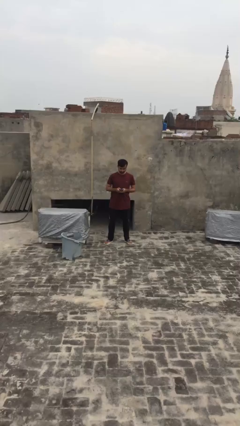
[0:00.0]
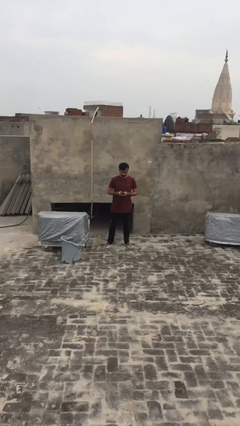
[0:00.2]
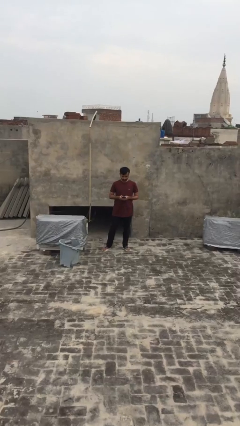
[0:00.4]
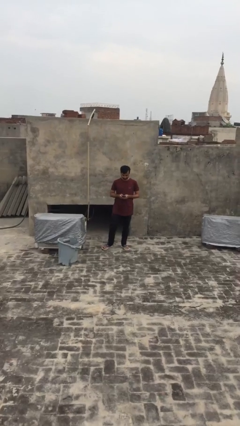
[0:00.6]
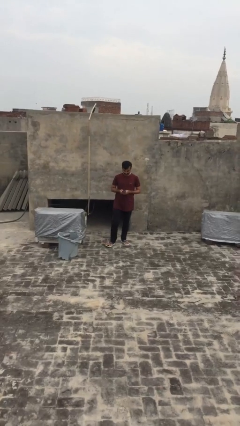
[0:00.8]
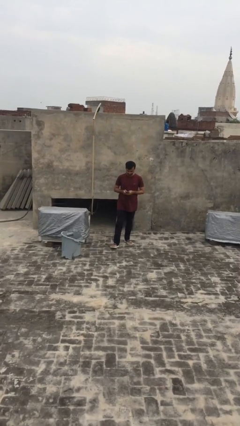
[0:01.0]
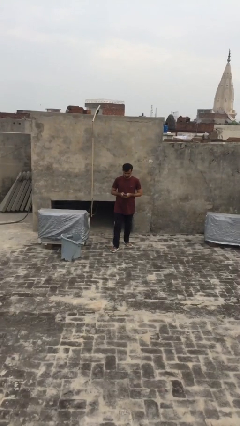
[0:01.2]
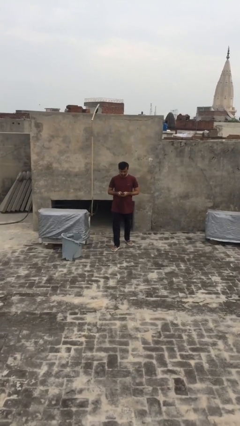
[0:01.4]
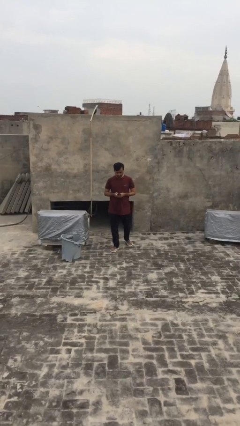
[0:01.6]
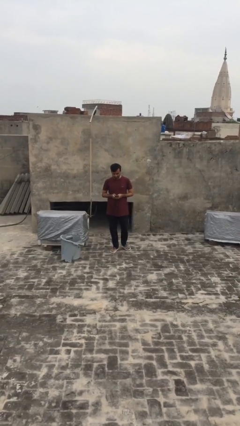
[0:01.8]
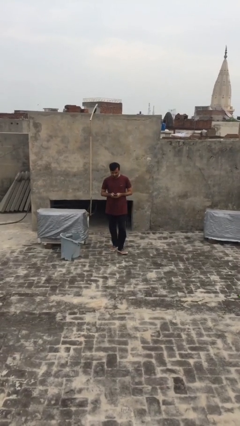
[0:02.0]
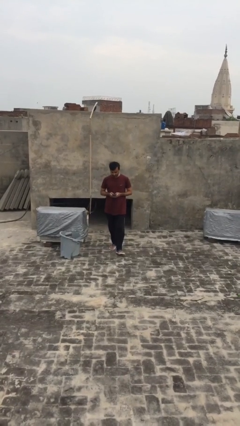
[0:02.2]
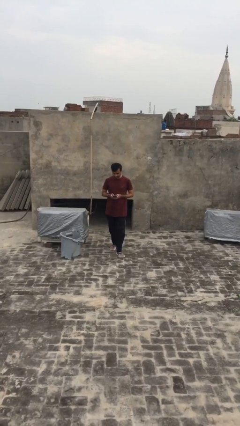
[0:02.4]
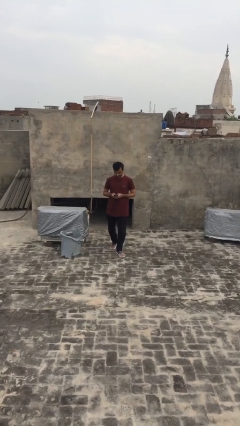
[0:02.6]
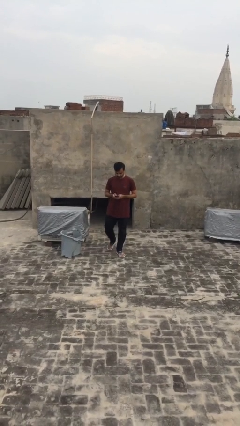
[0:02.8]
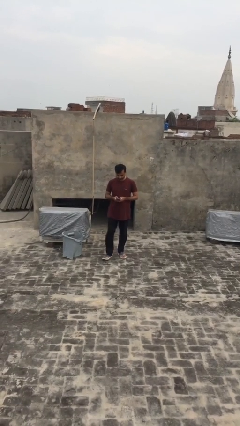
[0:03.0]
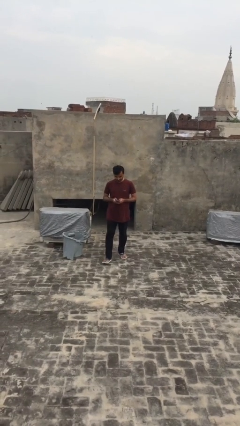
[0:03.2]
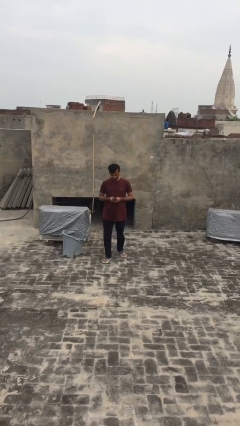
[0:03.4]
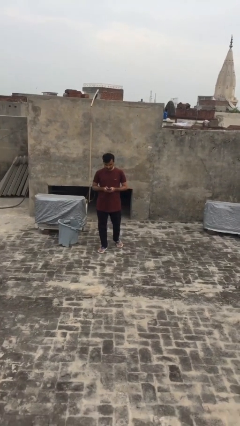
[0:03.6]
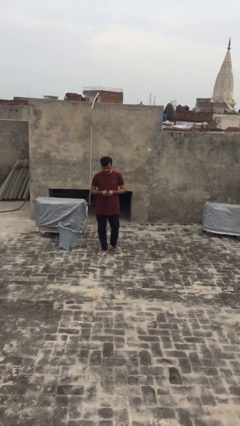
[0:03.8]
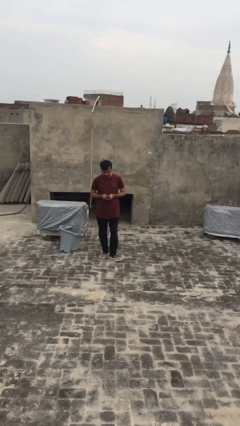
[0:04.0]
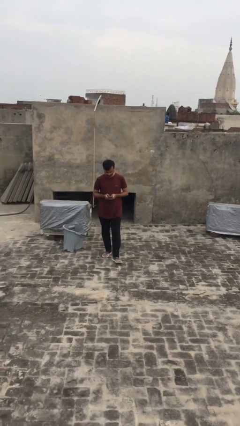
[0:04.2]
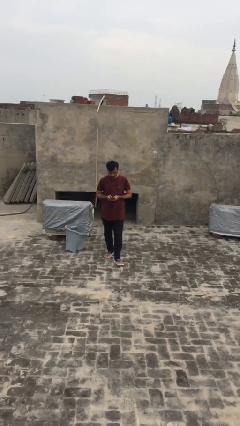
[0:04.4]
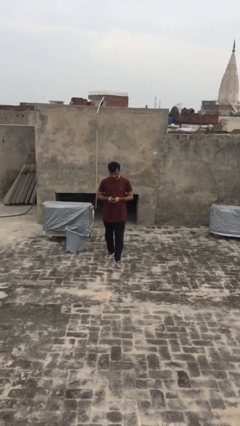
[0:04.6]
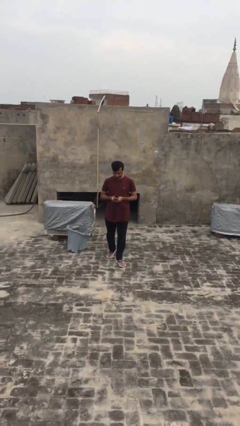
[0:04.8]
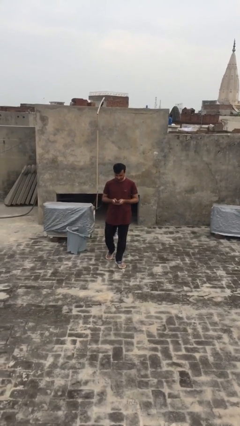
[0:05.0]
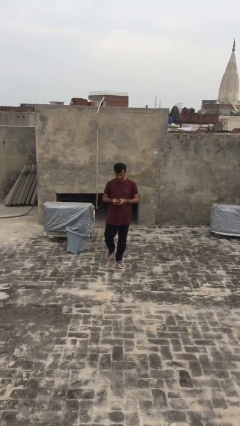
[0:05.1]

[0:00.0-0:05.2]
person texts on phone

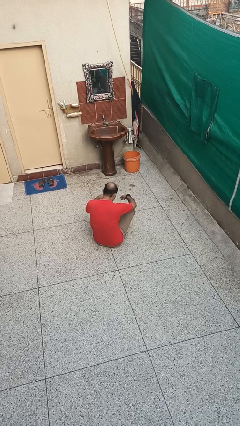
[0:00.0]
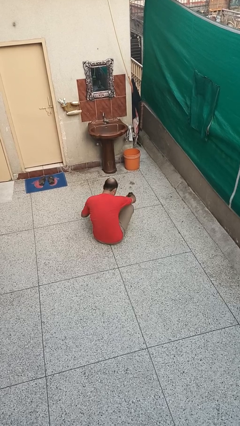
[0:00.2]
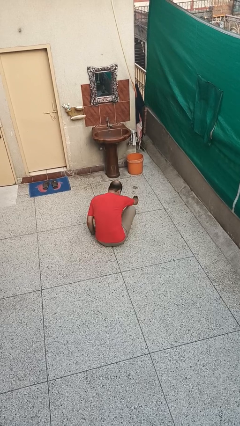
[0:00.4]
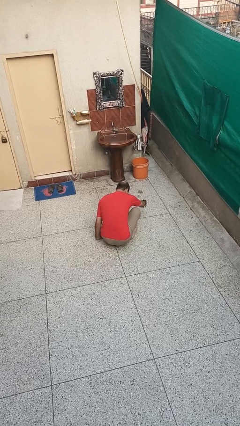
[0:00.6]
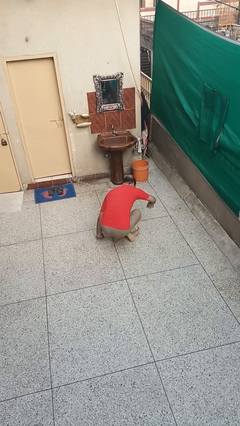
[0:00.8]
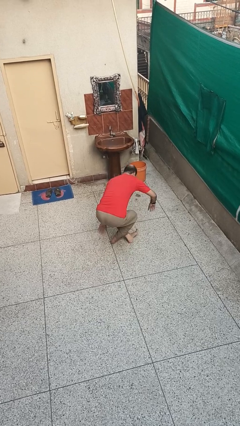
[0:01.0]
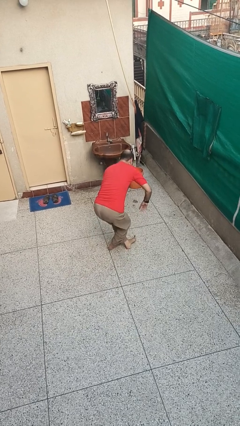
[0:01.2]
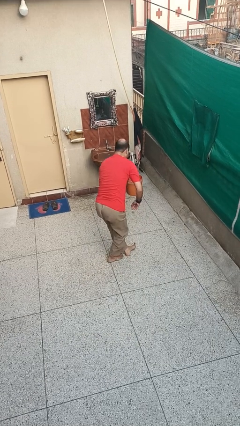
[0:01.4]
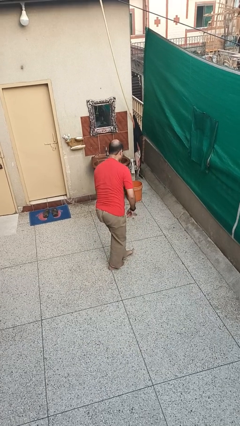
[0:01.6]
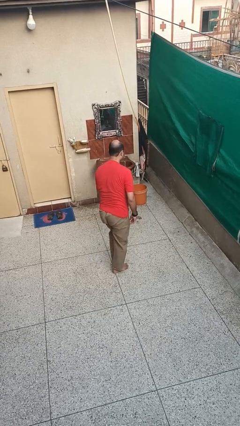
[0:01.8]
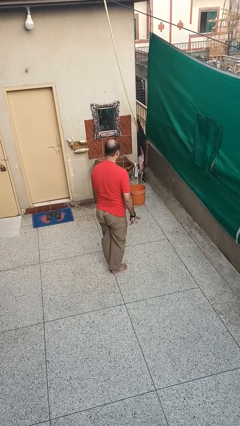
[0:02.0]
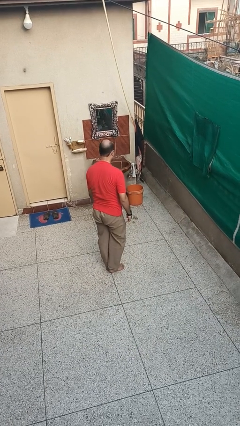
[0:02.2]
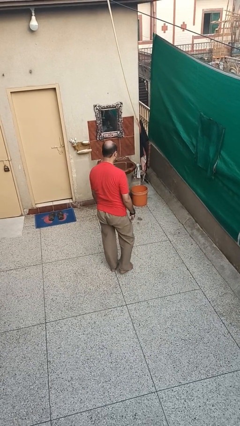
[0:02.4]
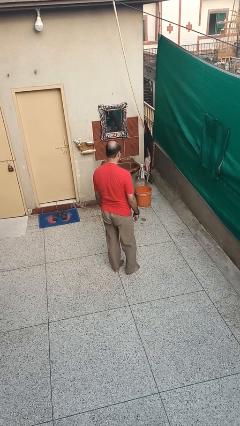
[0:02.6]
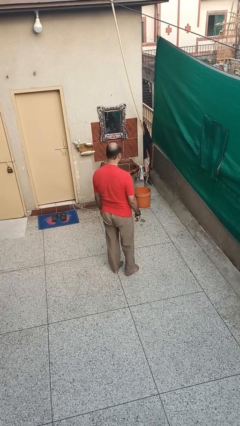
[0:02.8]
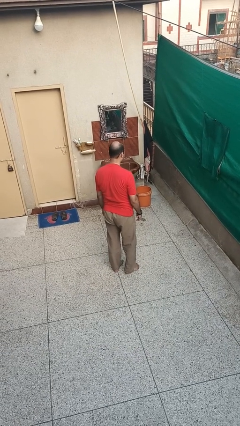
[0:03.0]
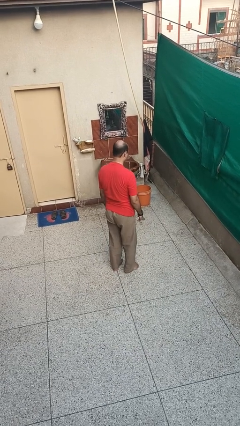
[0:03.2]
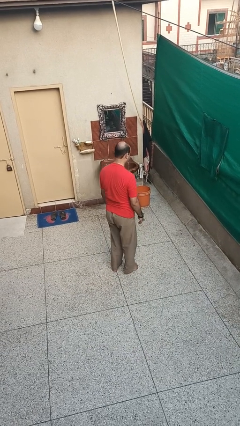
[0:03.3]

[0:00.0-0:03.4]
person stands up from floor

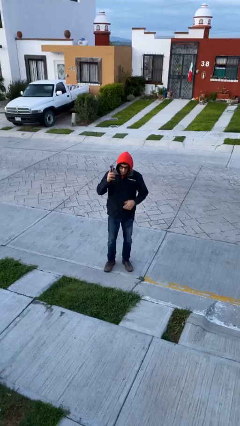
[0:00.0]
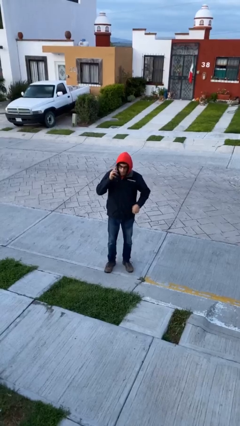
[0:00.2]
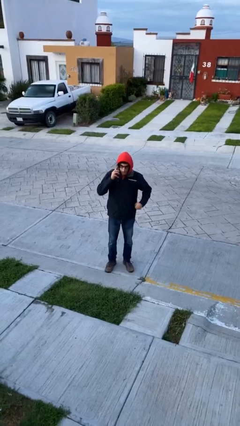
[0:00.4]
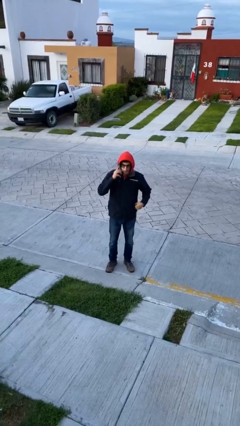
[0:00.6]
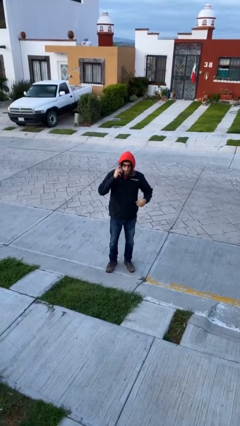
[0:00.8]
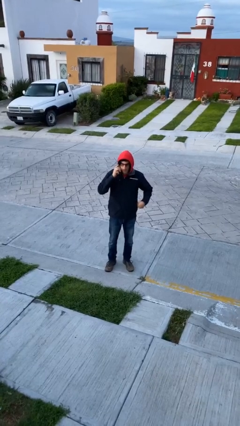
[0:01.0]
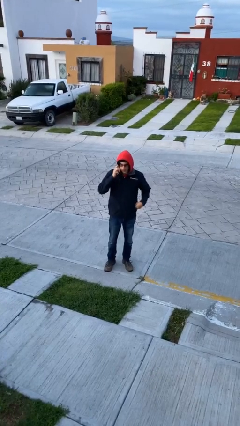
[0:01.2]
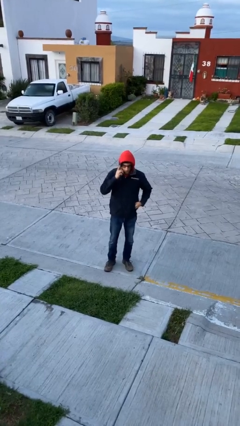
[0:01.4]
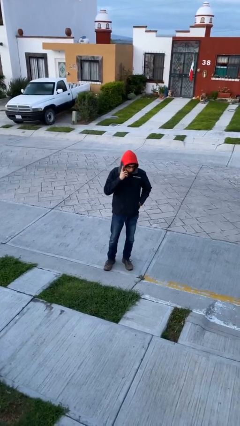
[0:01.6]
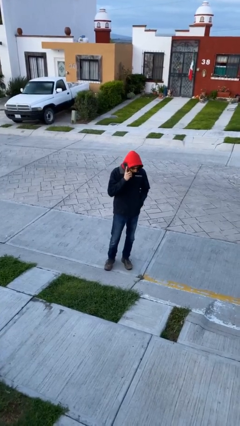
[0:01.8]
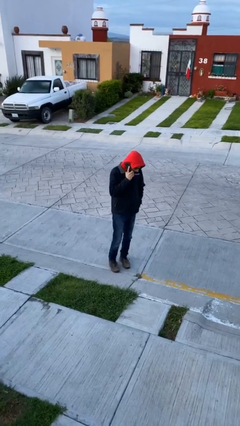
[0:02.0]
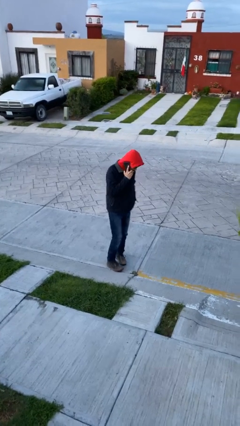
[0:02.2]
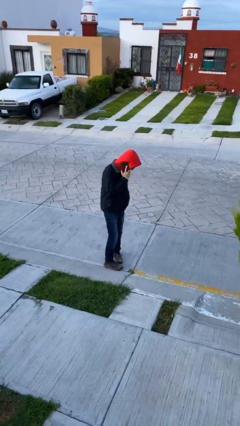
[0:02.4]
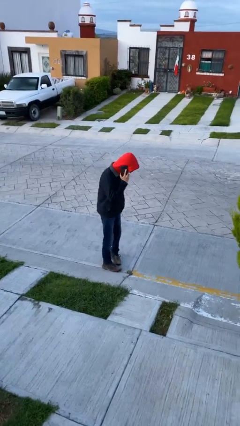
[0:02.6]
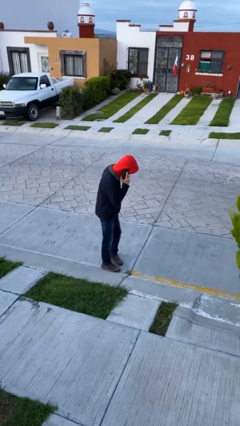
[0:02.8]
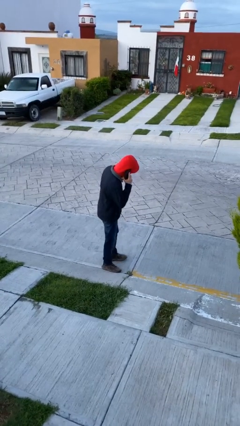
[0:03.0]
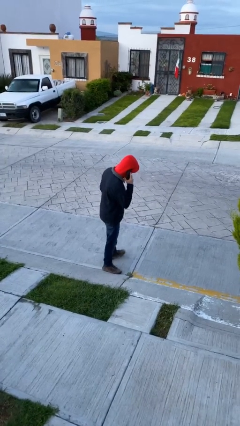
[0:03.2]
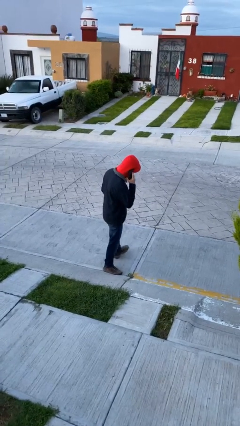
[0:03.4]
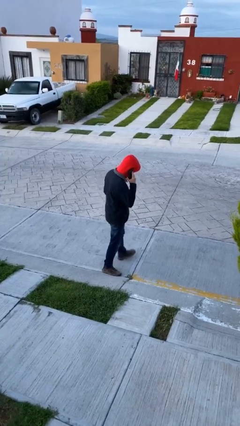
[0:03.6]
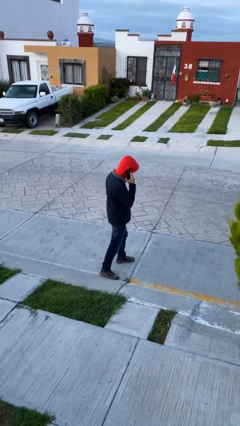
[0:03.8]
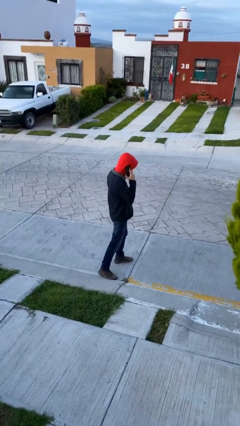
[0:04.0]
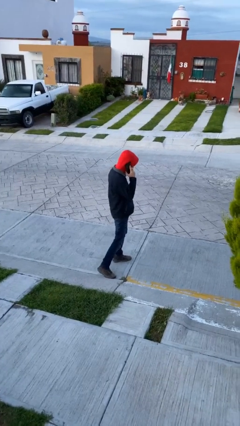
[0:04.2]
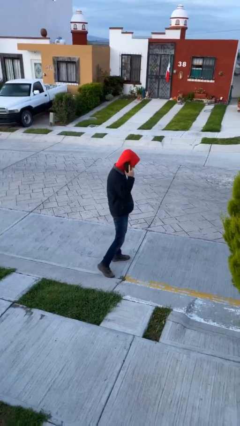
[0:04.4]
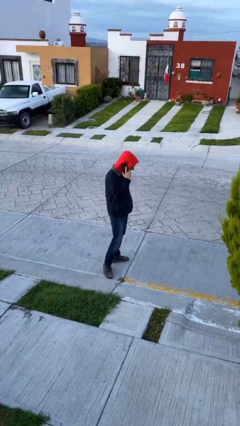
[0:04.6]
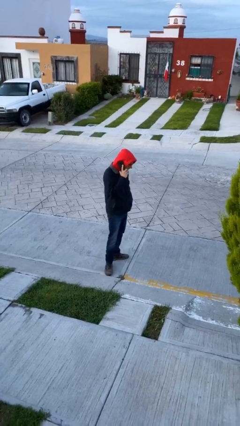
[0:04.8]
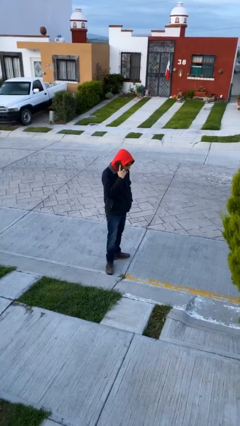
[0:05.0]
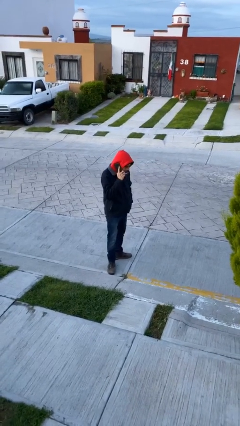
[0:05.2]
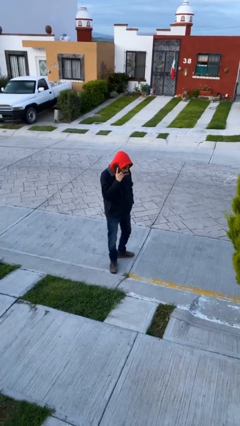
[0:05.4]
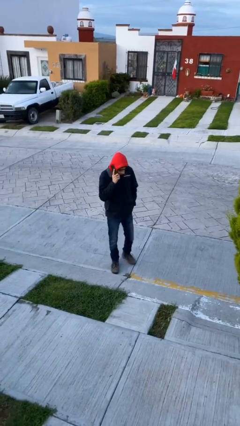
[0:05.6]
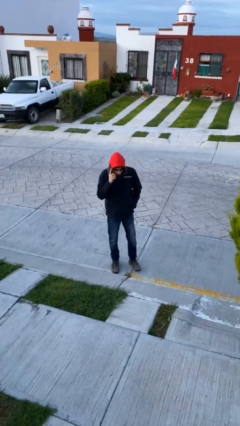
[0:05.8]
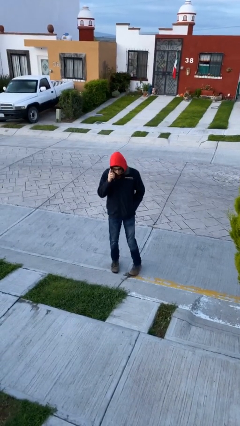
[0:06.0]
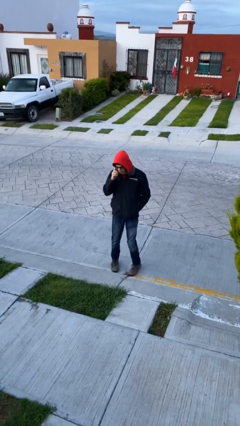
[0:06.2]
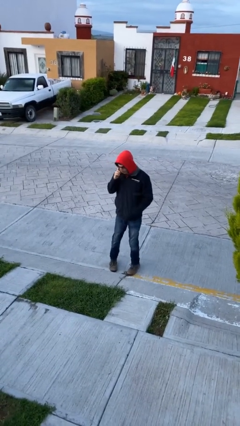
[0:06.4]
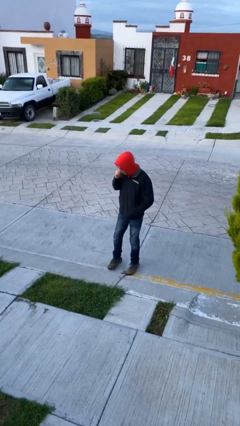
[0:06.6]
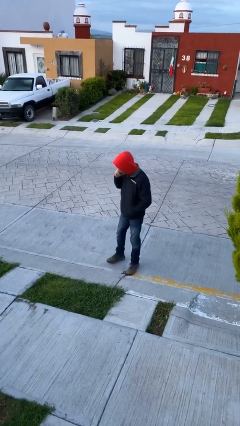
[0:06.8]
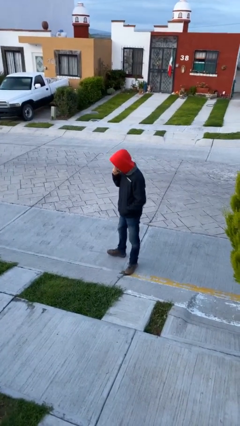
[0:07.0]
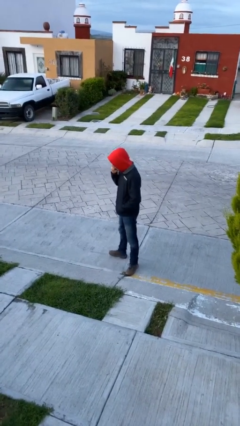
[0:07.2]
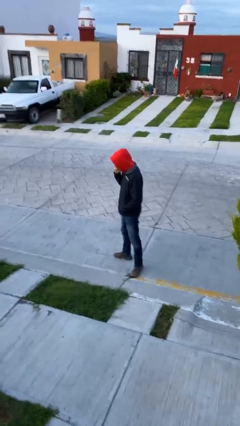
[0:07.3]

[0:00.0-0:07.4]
person talks on phone

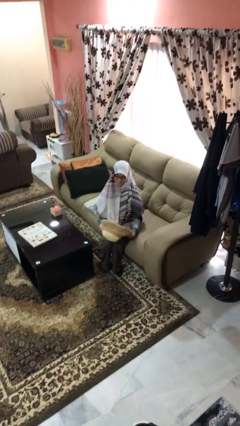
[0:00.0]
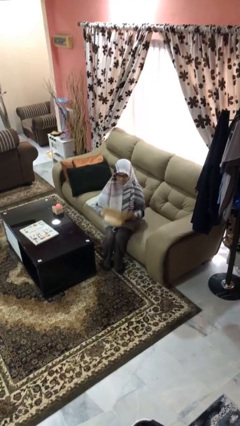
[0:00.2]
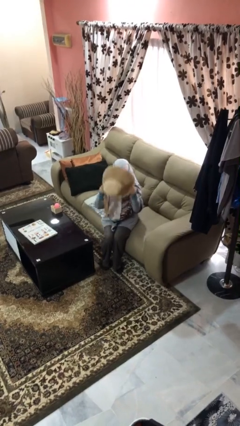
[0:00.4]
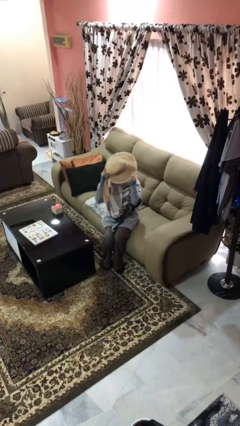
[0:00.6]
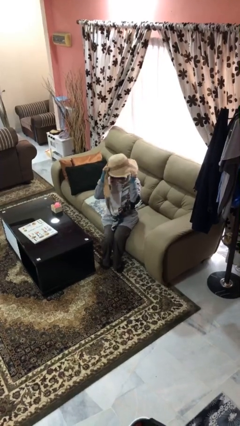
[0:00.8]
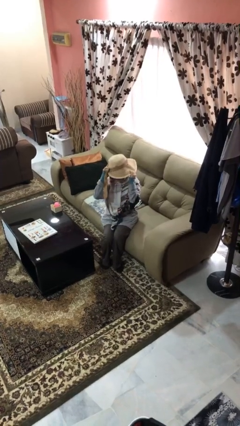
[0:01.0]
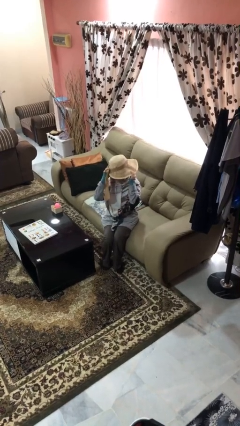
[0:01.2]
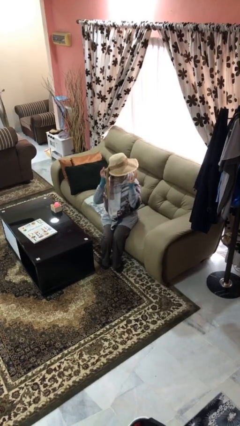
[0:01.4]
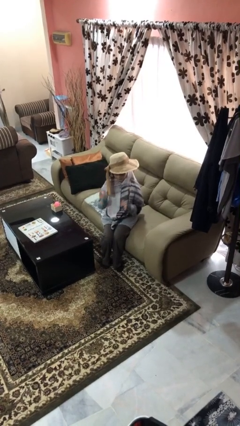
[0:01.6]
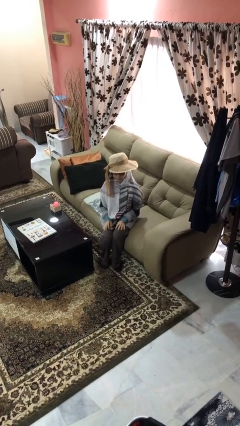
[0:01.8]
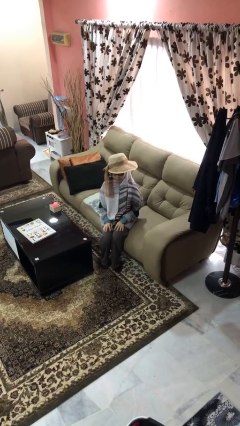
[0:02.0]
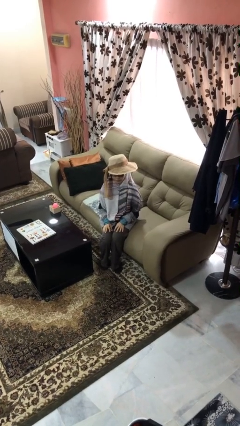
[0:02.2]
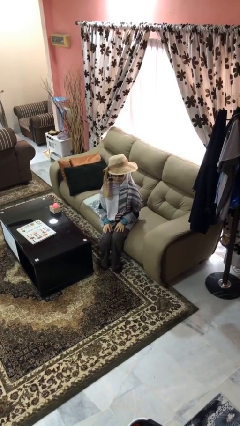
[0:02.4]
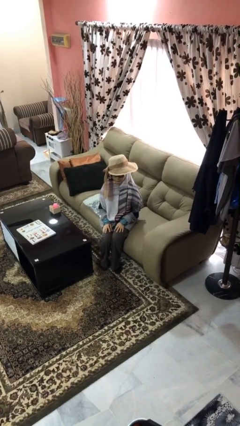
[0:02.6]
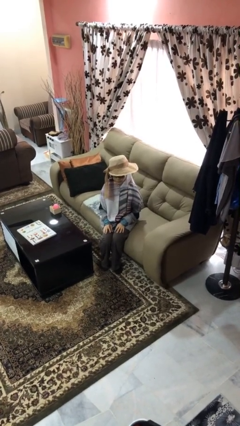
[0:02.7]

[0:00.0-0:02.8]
person puts on hat
